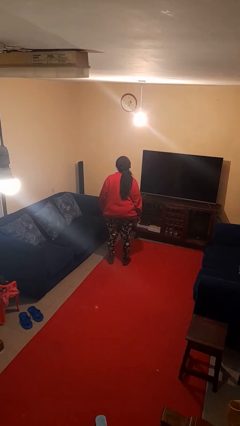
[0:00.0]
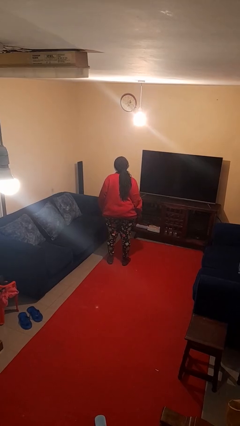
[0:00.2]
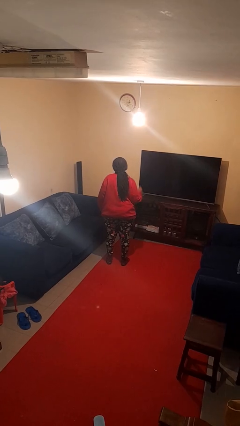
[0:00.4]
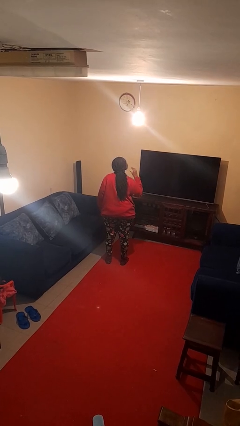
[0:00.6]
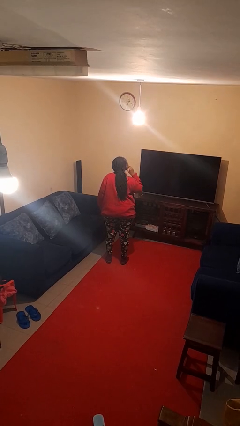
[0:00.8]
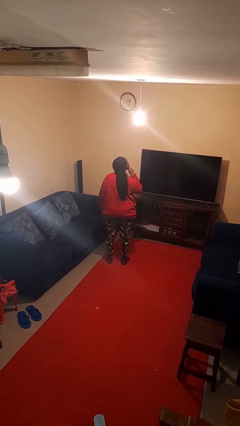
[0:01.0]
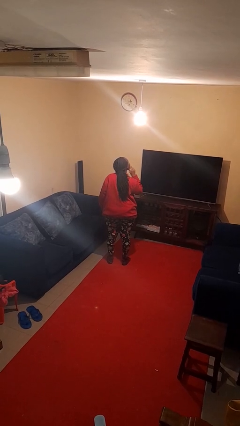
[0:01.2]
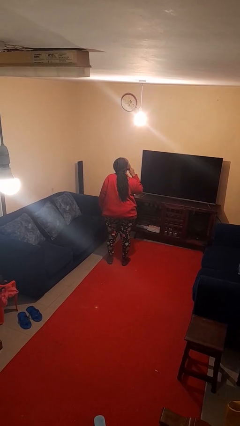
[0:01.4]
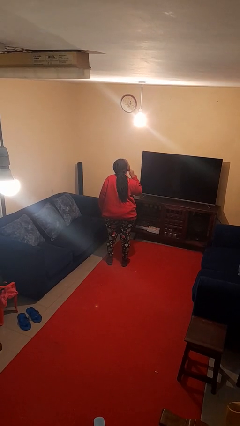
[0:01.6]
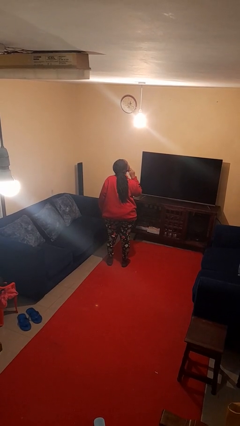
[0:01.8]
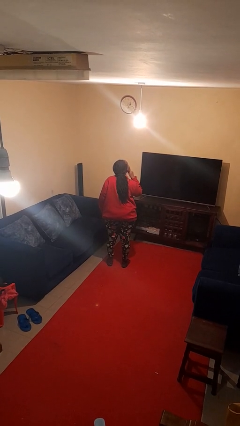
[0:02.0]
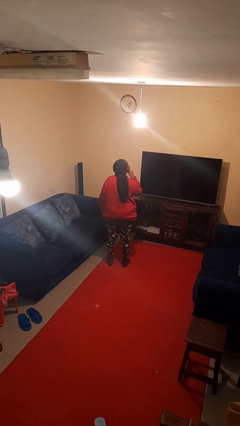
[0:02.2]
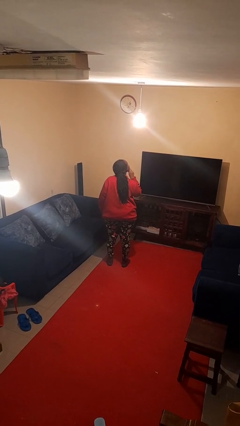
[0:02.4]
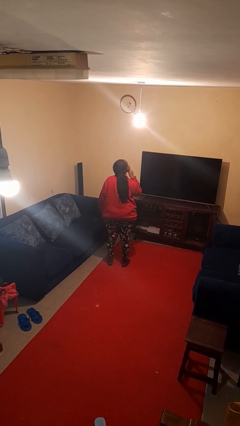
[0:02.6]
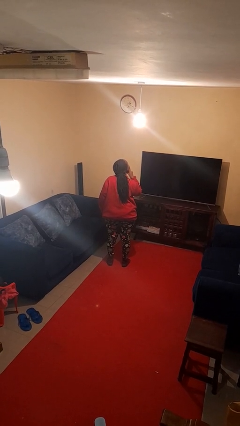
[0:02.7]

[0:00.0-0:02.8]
person strokes chin

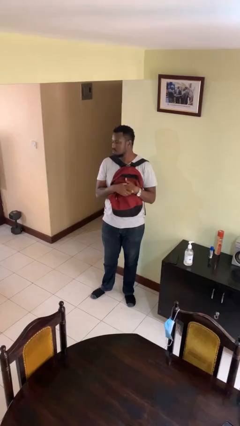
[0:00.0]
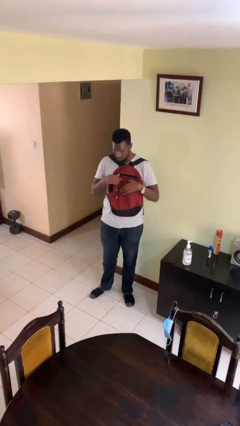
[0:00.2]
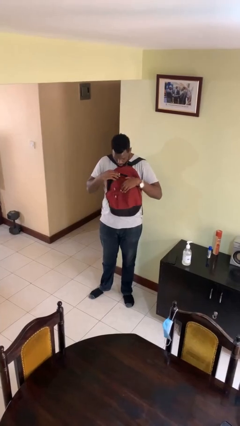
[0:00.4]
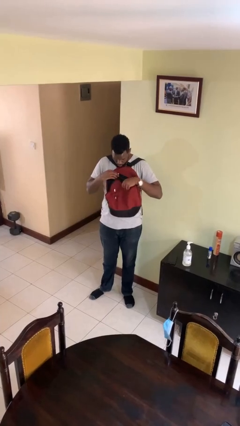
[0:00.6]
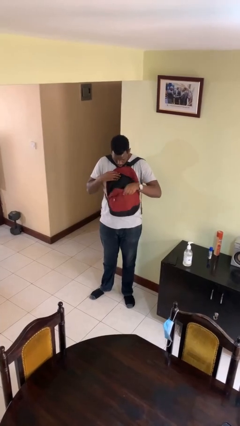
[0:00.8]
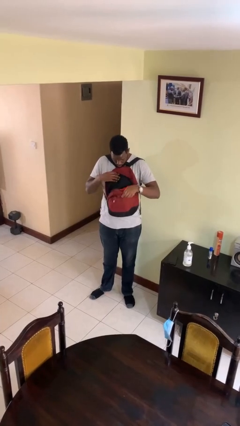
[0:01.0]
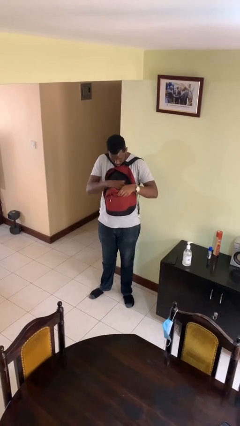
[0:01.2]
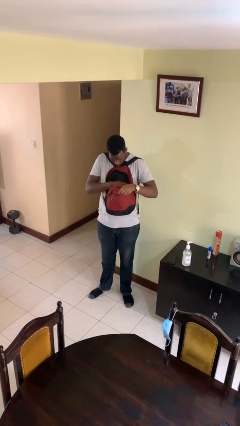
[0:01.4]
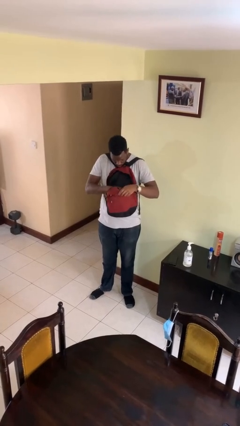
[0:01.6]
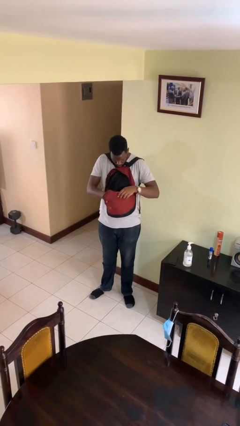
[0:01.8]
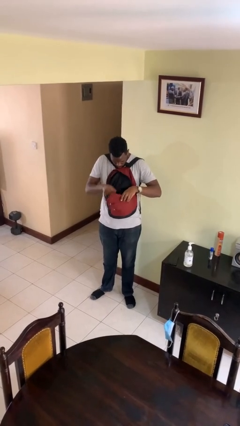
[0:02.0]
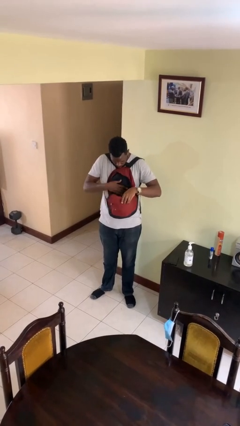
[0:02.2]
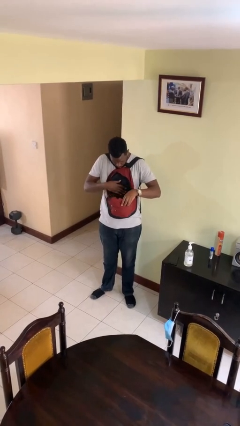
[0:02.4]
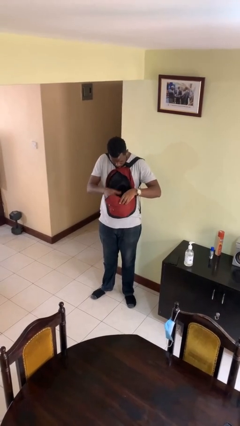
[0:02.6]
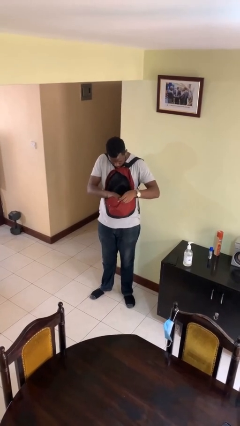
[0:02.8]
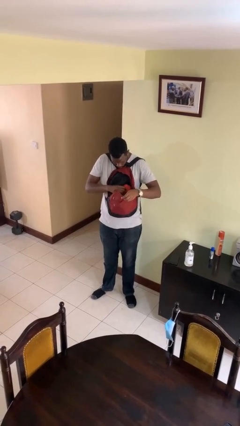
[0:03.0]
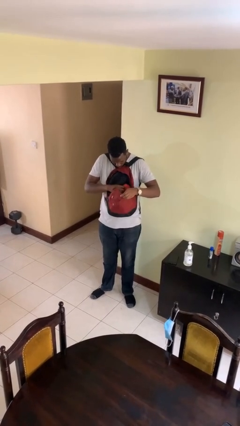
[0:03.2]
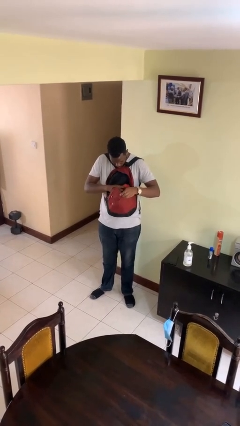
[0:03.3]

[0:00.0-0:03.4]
person searches in backpack

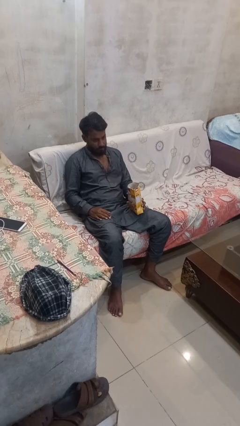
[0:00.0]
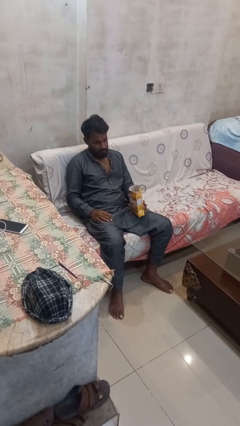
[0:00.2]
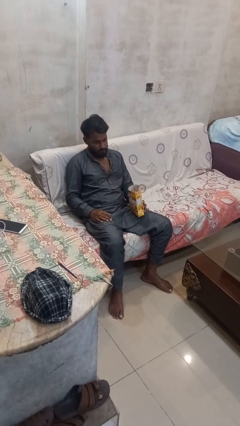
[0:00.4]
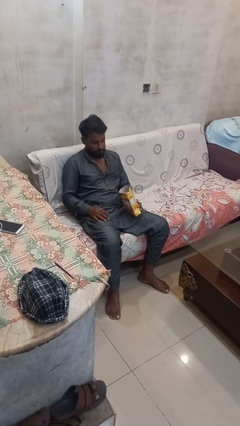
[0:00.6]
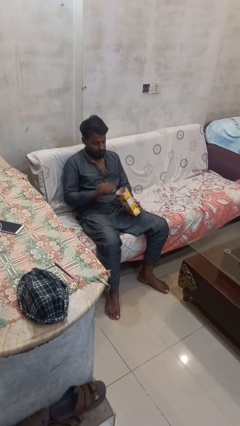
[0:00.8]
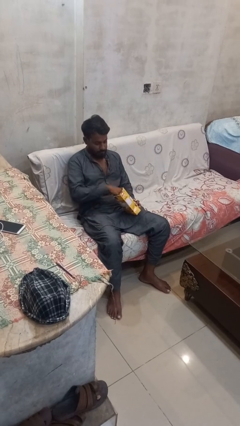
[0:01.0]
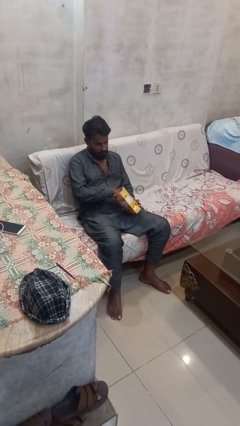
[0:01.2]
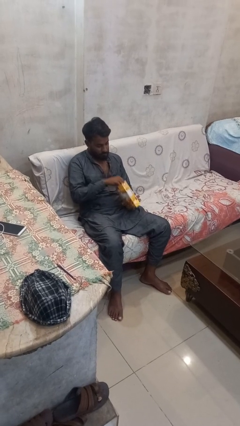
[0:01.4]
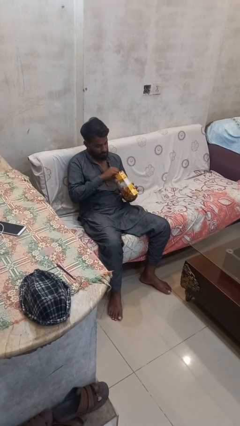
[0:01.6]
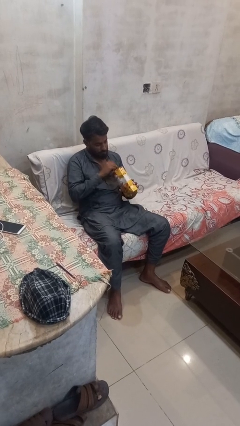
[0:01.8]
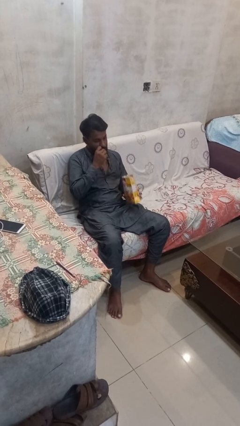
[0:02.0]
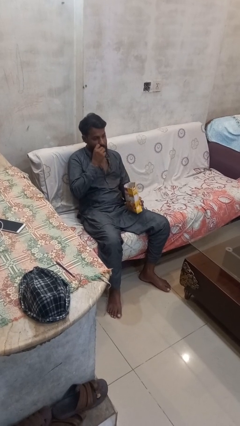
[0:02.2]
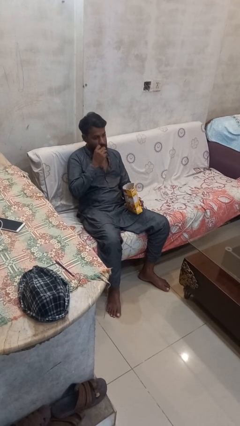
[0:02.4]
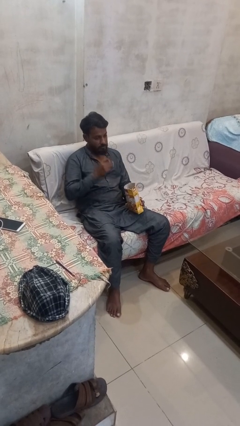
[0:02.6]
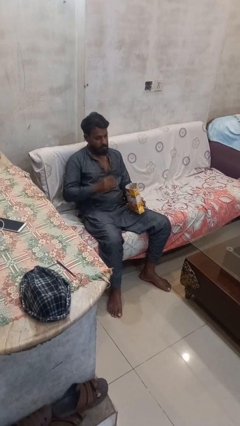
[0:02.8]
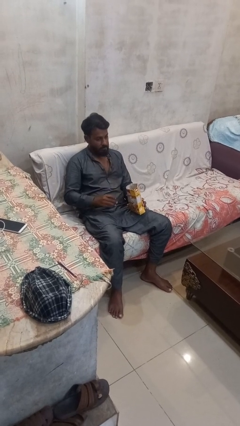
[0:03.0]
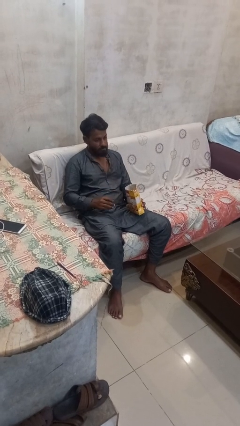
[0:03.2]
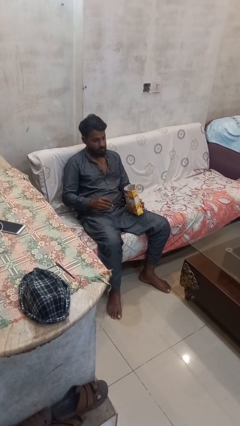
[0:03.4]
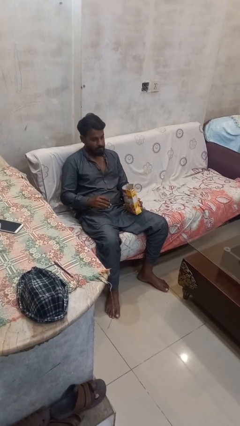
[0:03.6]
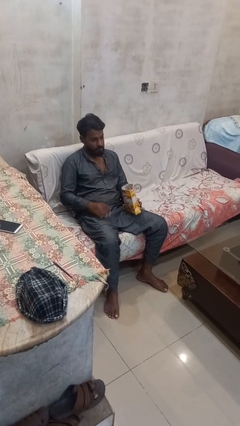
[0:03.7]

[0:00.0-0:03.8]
person eats snack from bag

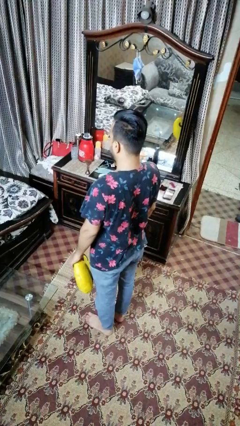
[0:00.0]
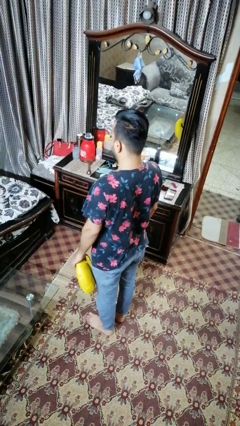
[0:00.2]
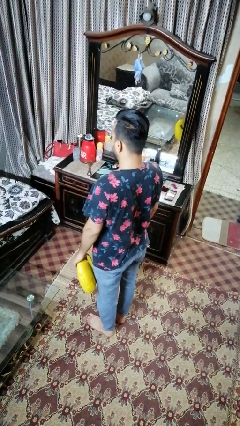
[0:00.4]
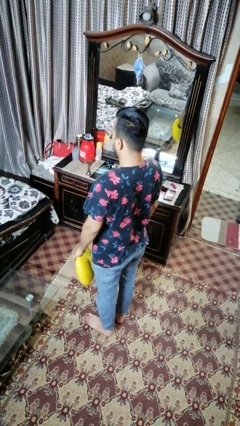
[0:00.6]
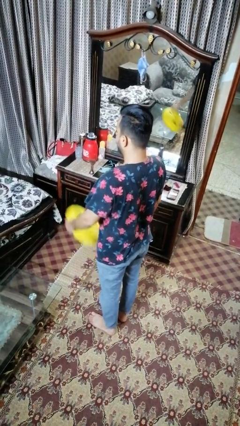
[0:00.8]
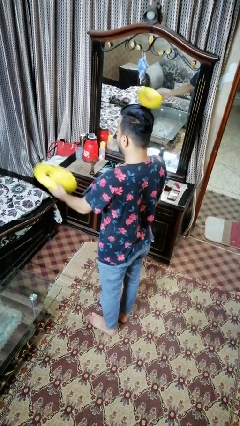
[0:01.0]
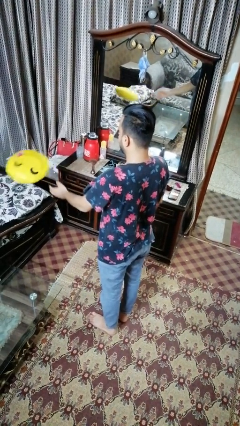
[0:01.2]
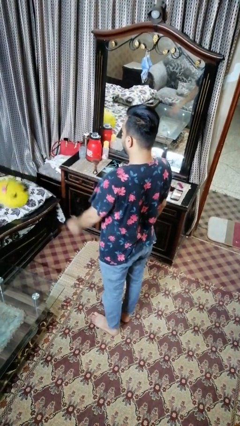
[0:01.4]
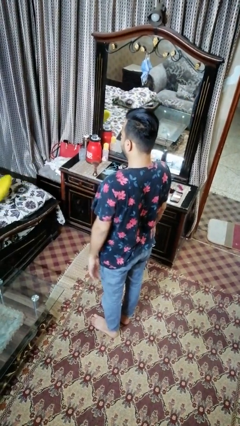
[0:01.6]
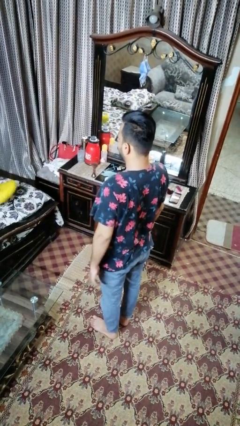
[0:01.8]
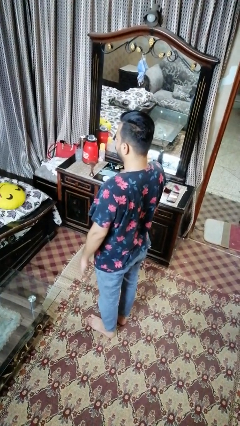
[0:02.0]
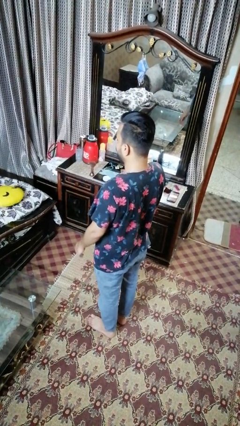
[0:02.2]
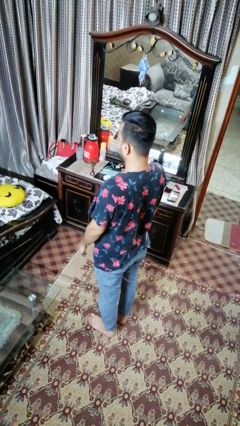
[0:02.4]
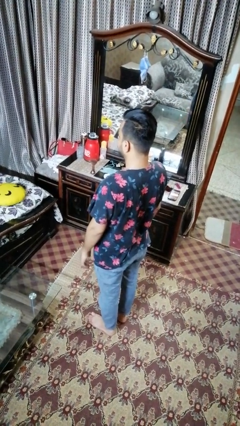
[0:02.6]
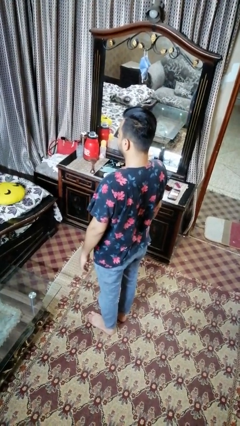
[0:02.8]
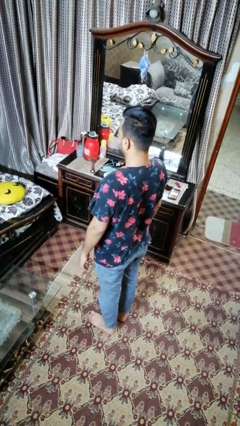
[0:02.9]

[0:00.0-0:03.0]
person throws object on bed

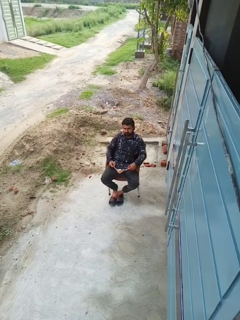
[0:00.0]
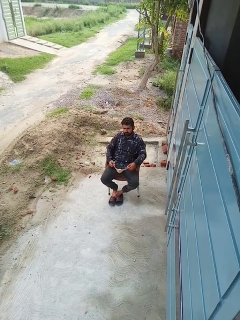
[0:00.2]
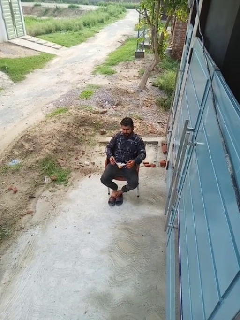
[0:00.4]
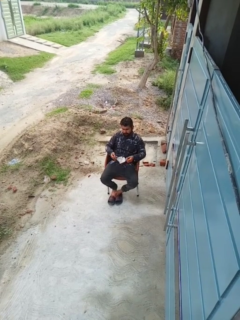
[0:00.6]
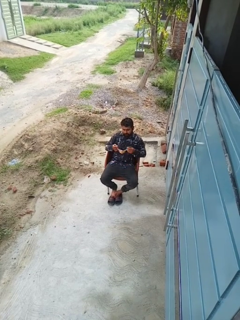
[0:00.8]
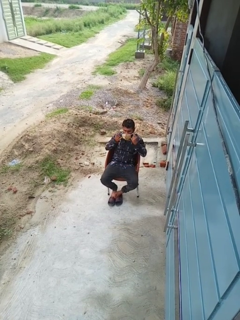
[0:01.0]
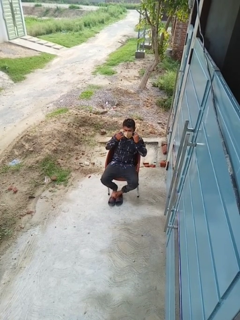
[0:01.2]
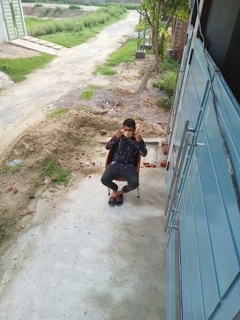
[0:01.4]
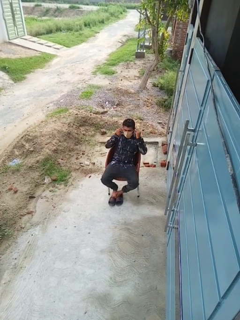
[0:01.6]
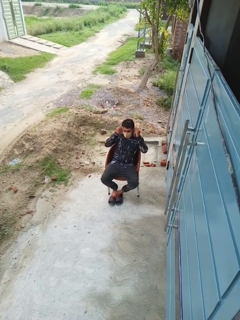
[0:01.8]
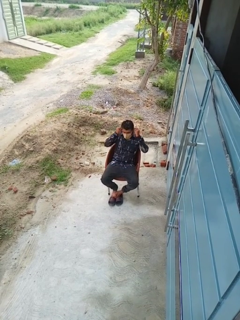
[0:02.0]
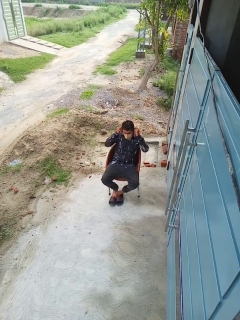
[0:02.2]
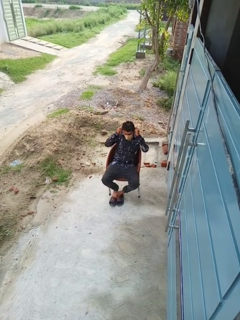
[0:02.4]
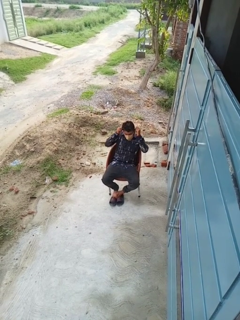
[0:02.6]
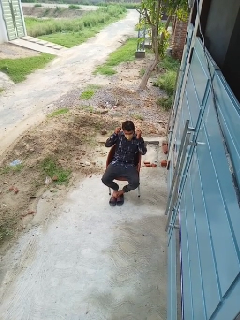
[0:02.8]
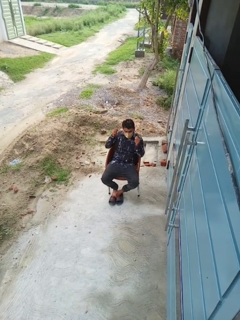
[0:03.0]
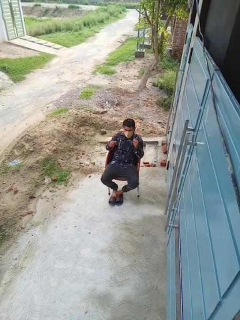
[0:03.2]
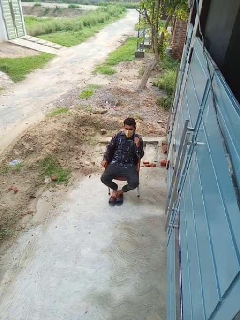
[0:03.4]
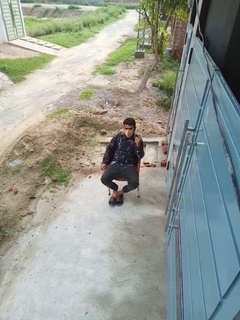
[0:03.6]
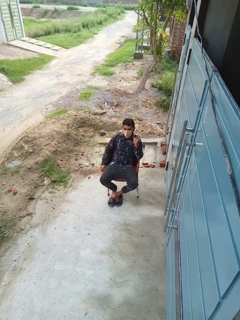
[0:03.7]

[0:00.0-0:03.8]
person puts on facemask

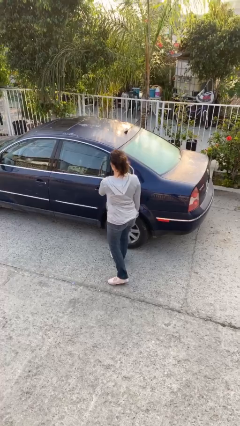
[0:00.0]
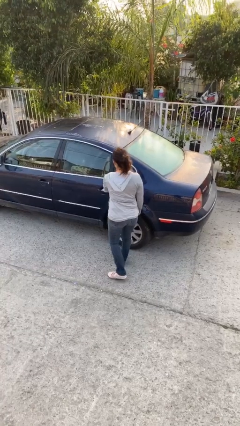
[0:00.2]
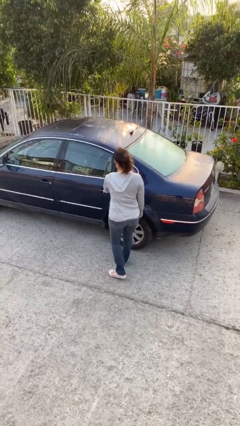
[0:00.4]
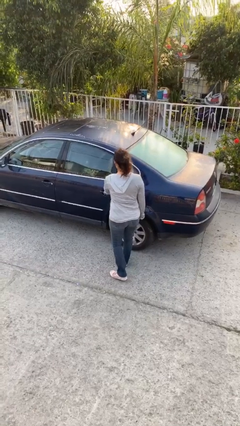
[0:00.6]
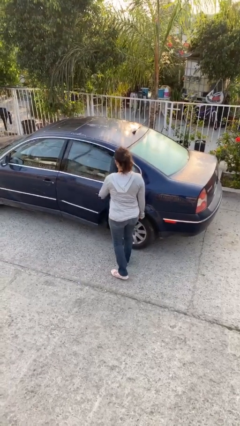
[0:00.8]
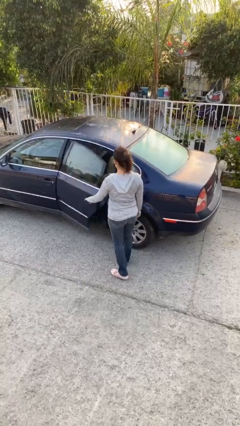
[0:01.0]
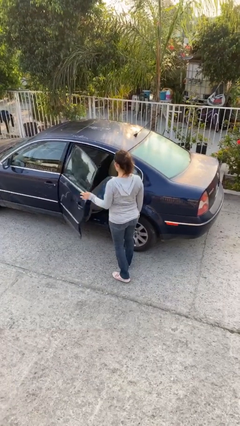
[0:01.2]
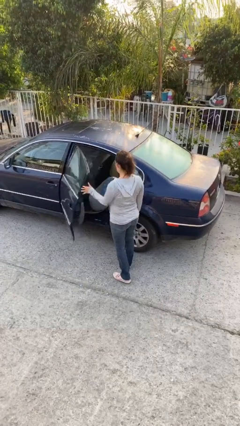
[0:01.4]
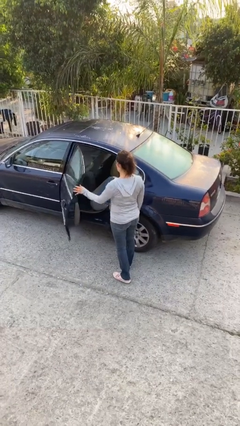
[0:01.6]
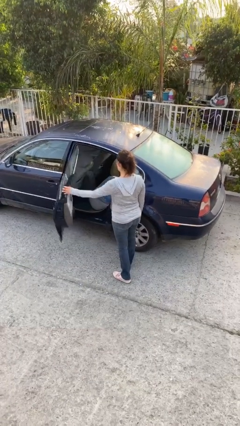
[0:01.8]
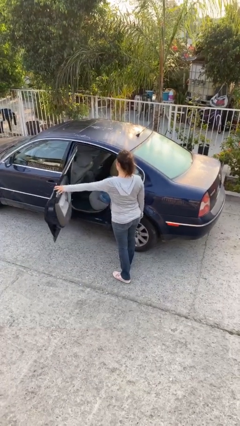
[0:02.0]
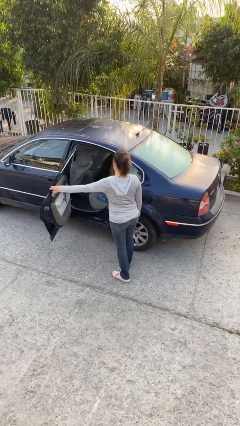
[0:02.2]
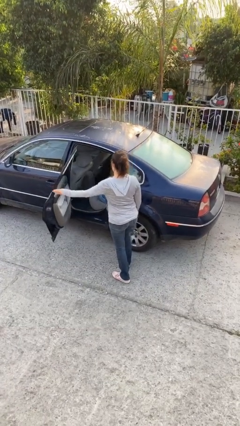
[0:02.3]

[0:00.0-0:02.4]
person opens car door
